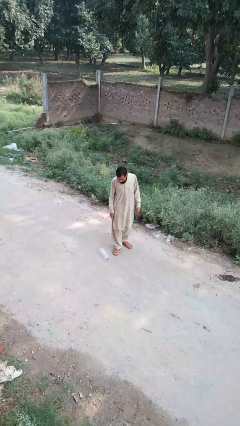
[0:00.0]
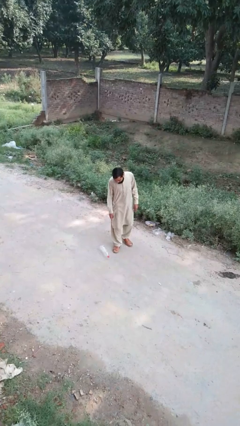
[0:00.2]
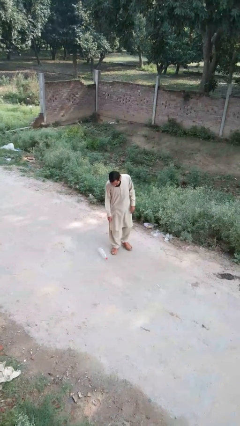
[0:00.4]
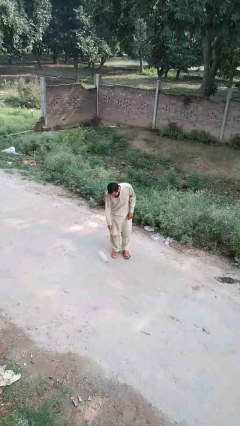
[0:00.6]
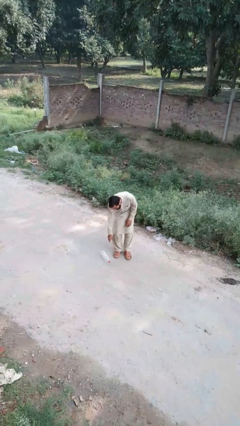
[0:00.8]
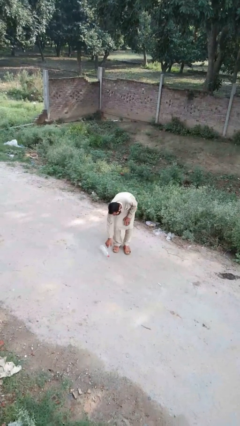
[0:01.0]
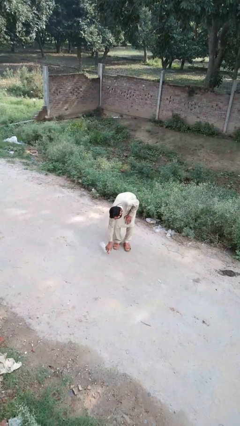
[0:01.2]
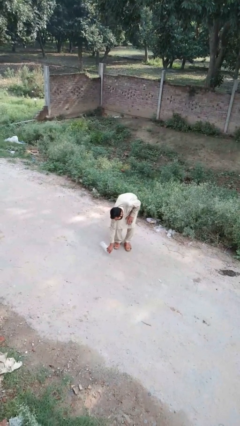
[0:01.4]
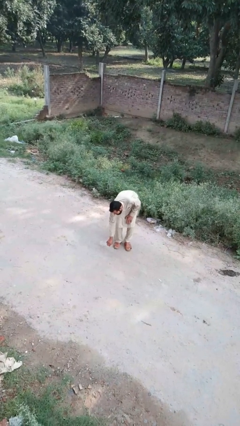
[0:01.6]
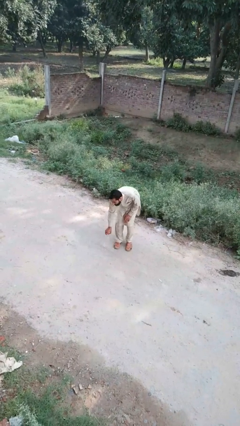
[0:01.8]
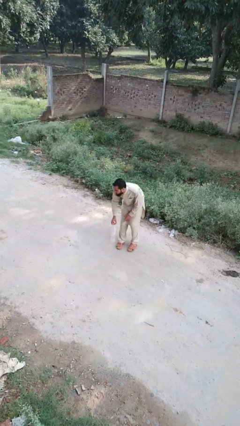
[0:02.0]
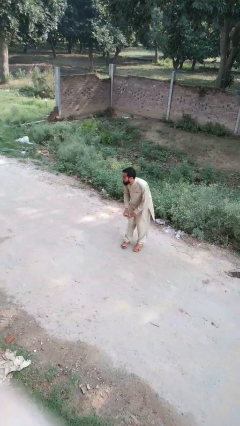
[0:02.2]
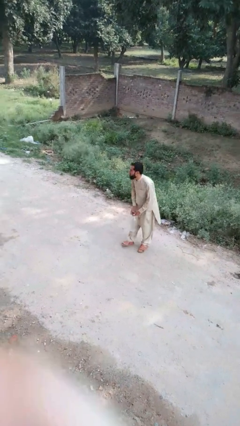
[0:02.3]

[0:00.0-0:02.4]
person picks up object from floor

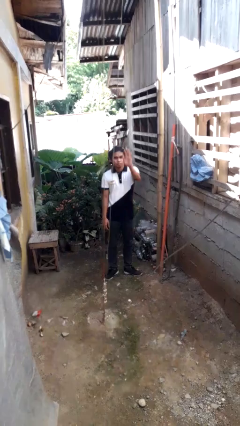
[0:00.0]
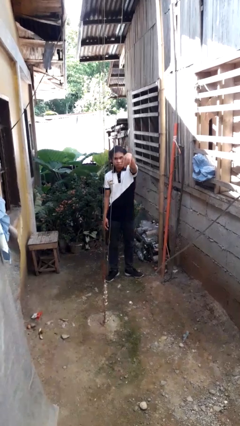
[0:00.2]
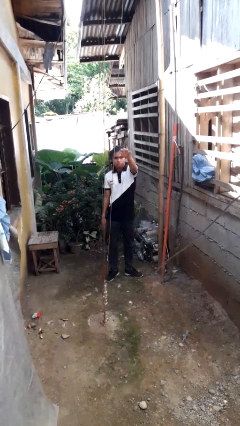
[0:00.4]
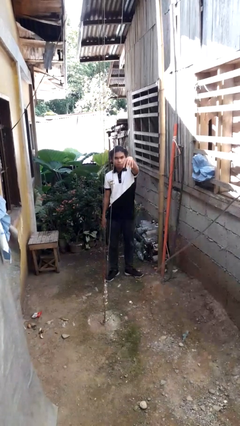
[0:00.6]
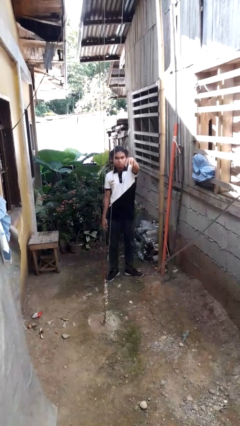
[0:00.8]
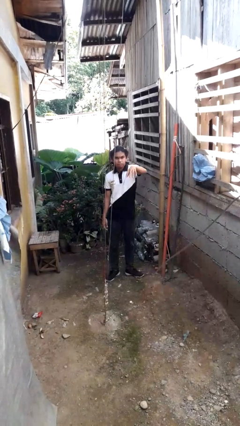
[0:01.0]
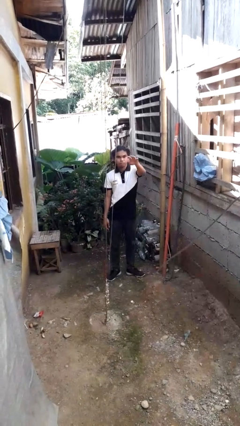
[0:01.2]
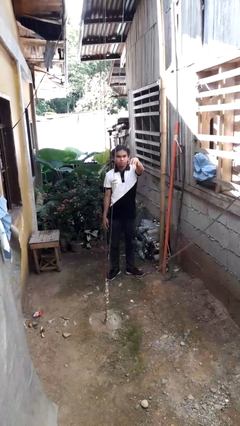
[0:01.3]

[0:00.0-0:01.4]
person gestures come here

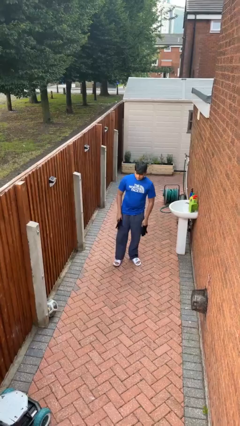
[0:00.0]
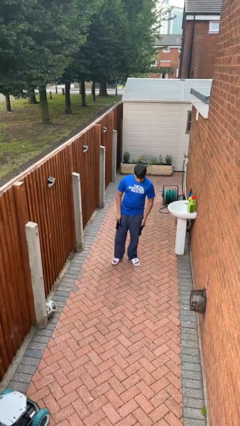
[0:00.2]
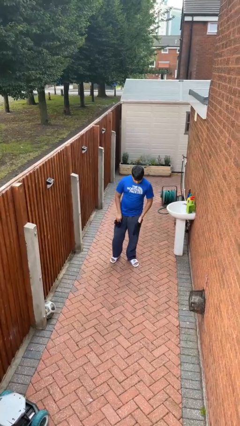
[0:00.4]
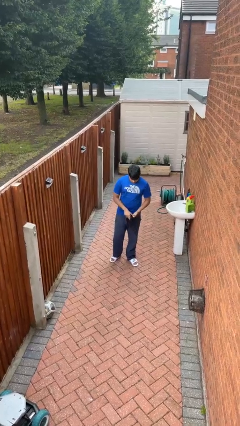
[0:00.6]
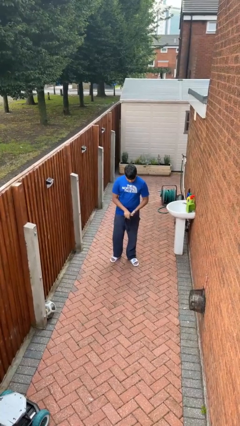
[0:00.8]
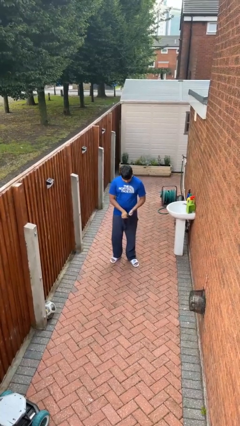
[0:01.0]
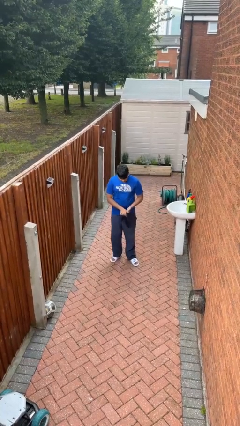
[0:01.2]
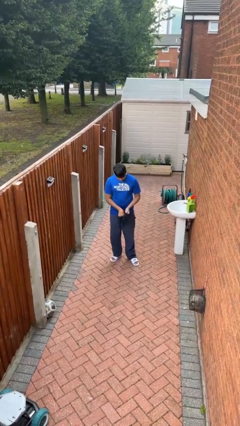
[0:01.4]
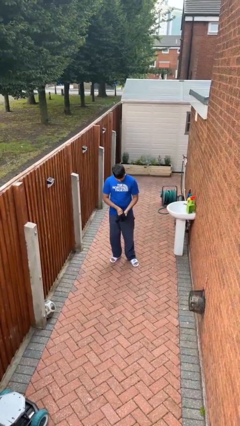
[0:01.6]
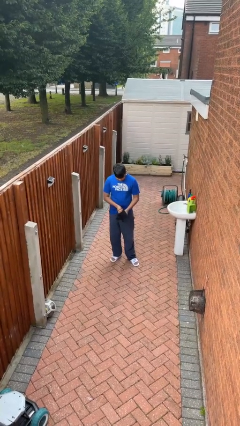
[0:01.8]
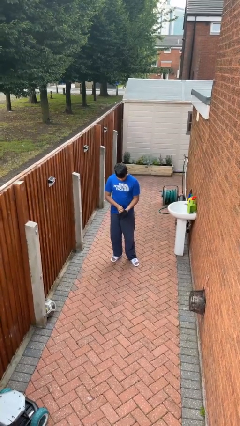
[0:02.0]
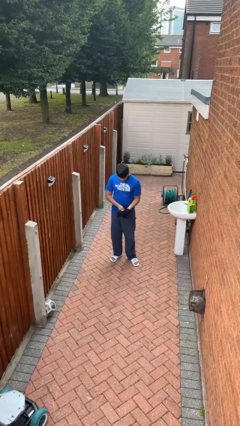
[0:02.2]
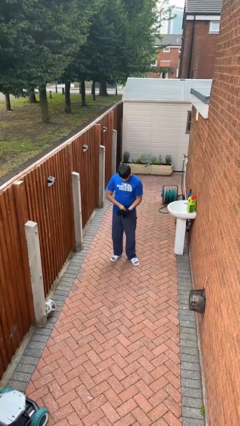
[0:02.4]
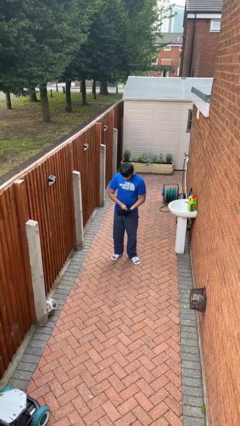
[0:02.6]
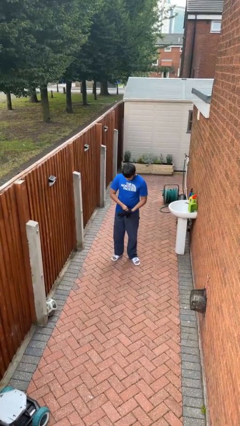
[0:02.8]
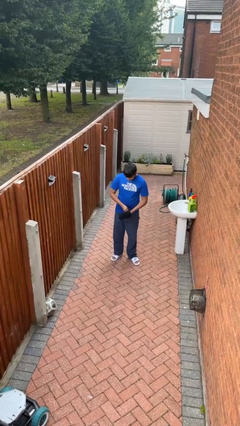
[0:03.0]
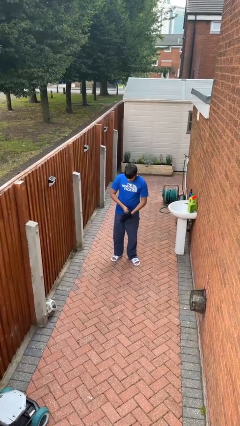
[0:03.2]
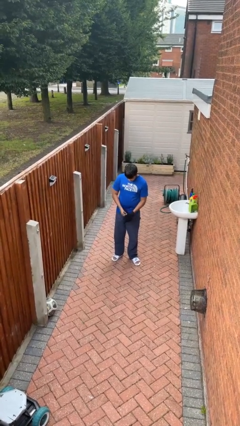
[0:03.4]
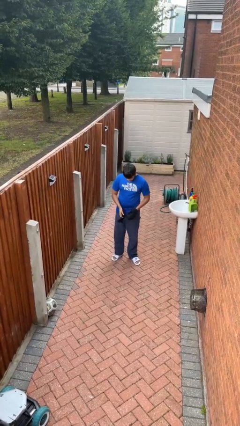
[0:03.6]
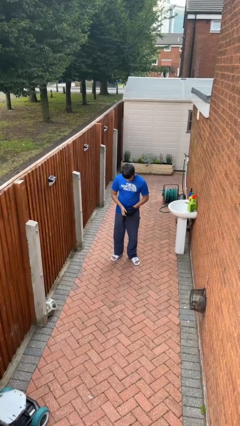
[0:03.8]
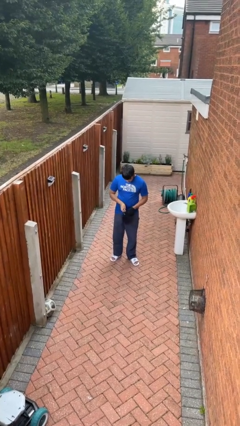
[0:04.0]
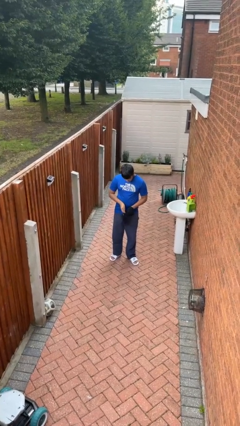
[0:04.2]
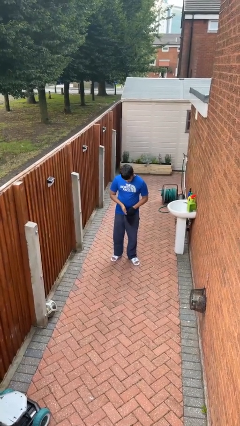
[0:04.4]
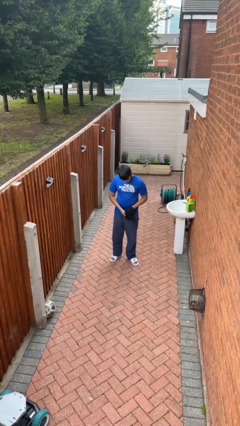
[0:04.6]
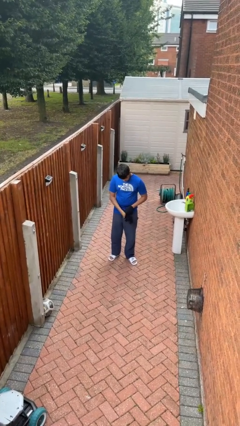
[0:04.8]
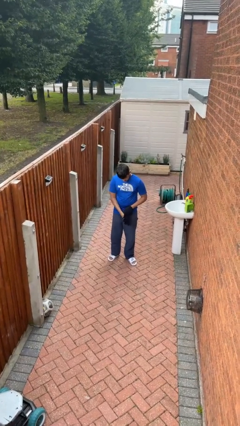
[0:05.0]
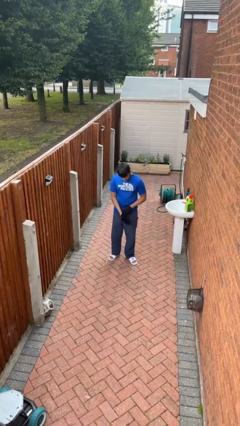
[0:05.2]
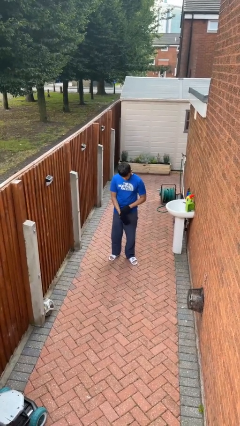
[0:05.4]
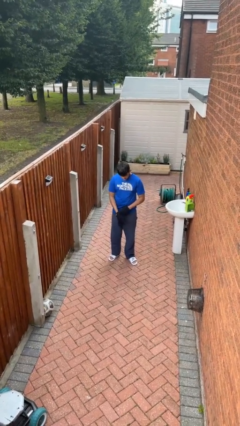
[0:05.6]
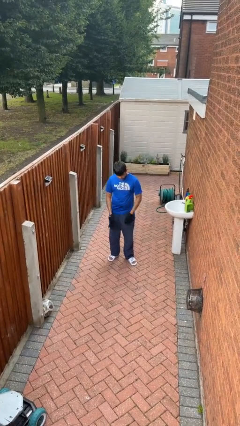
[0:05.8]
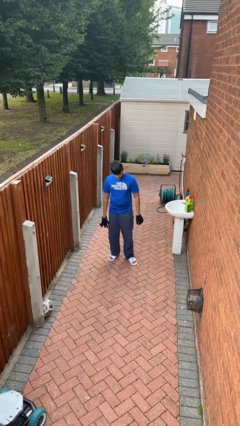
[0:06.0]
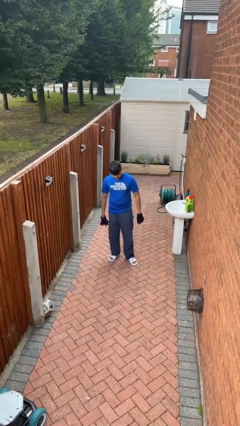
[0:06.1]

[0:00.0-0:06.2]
person puts on gloves

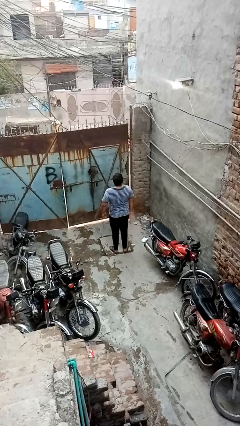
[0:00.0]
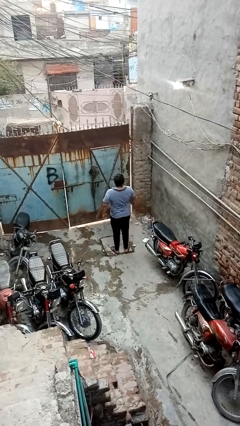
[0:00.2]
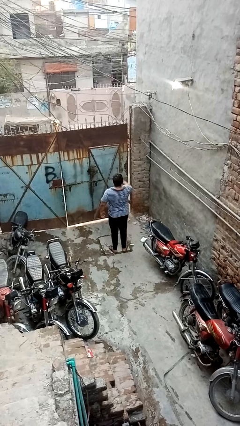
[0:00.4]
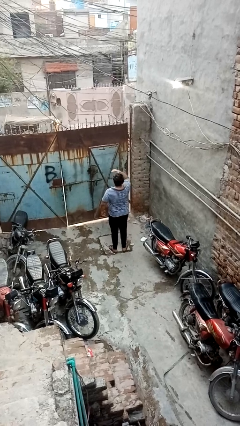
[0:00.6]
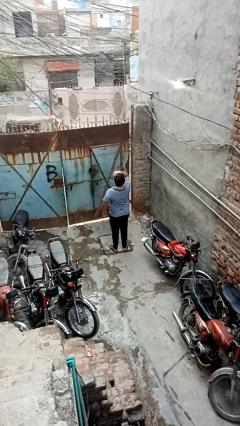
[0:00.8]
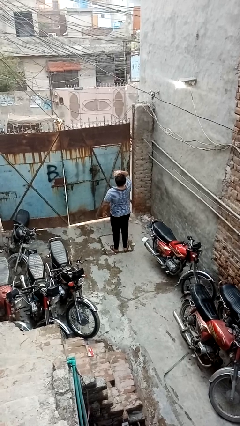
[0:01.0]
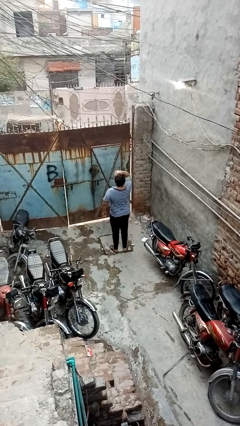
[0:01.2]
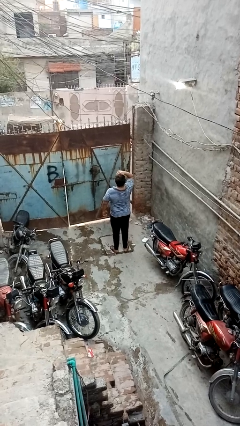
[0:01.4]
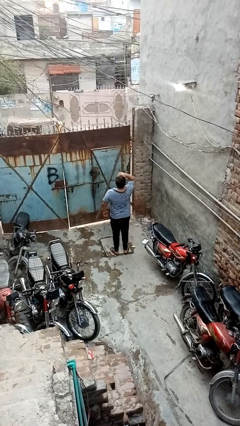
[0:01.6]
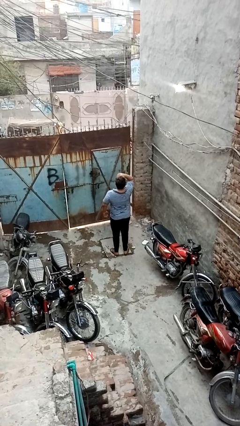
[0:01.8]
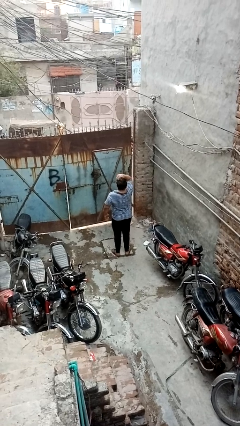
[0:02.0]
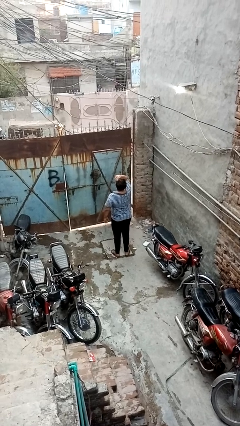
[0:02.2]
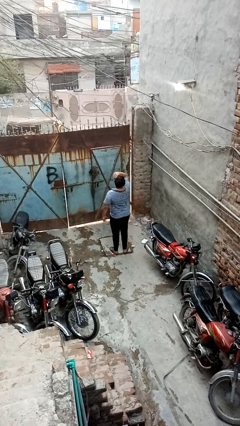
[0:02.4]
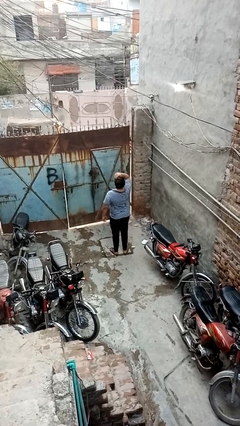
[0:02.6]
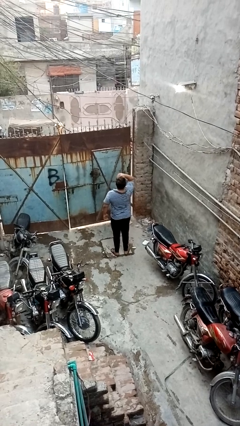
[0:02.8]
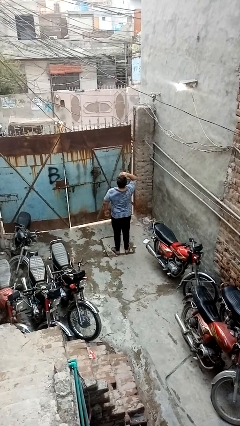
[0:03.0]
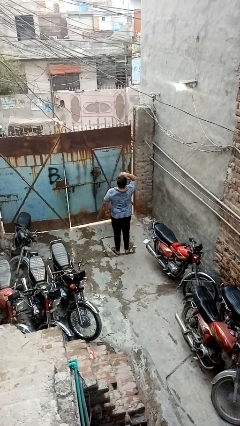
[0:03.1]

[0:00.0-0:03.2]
person shades eyes

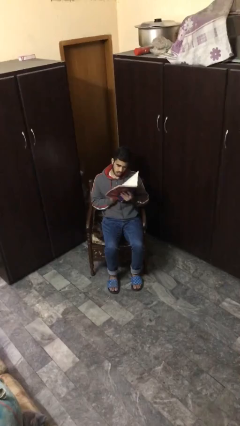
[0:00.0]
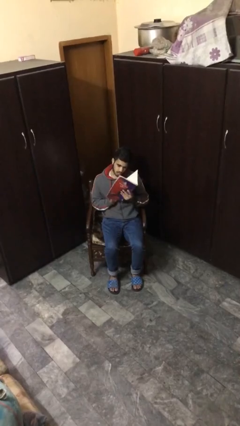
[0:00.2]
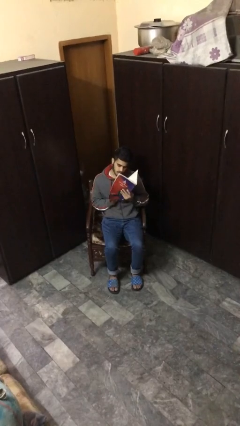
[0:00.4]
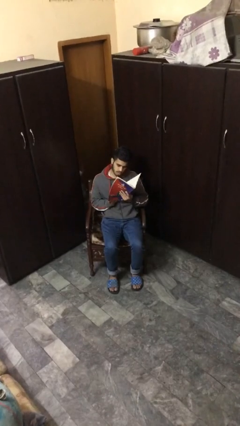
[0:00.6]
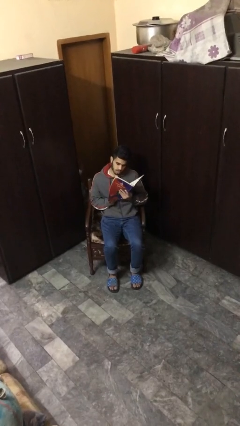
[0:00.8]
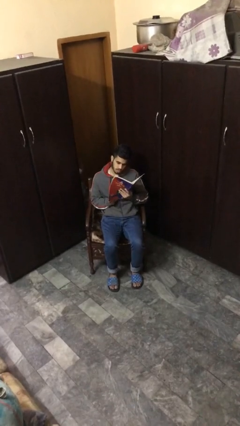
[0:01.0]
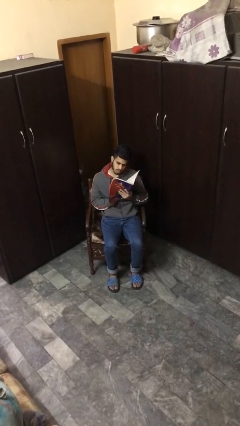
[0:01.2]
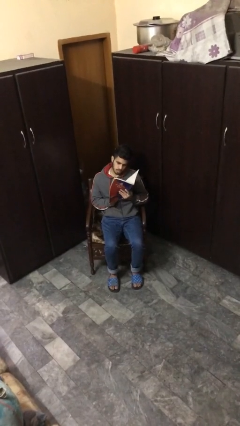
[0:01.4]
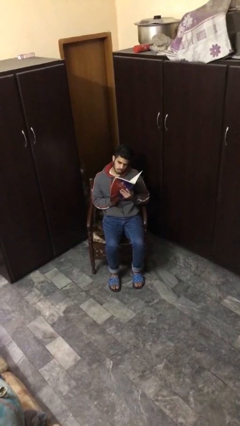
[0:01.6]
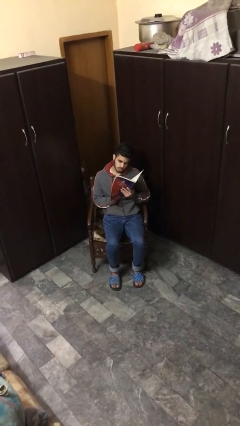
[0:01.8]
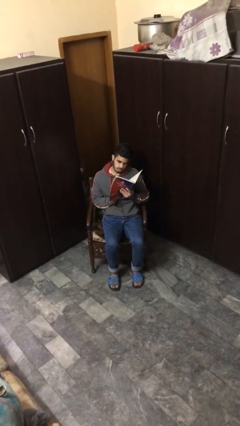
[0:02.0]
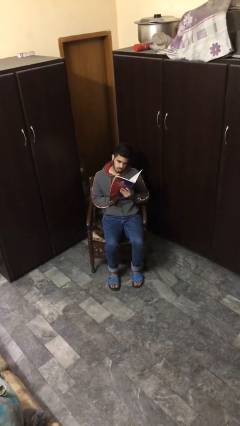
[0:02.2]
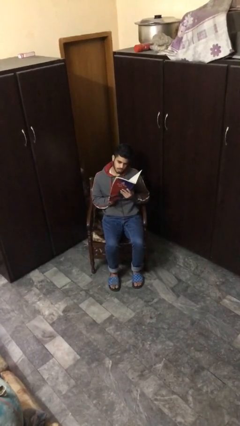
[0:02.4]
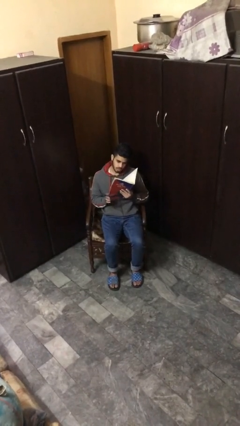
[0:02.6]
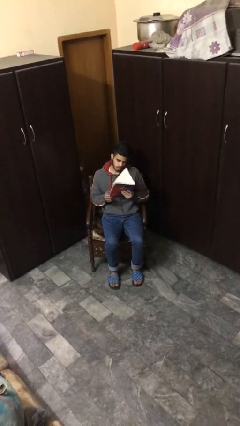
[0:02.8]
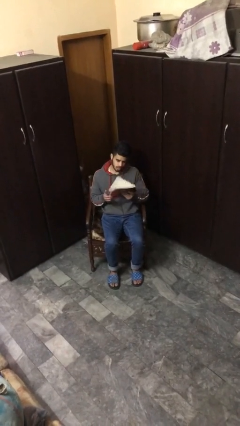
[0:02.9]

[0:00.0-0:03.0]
person reads document

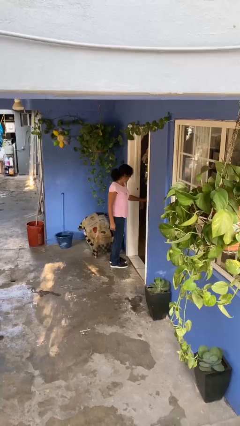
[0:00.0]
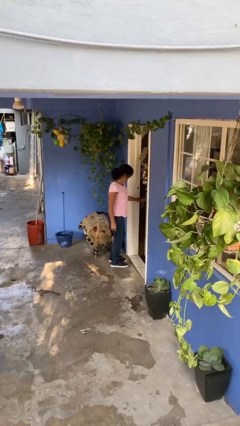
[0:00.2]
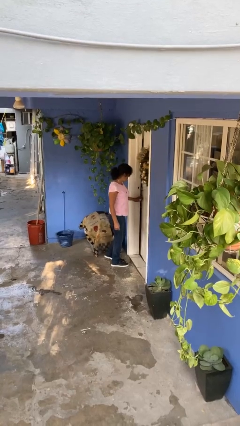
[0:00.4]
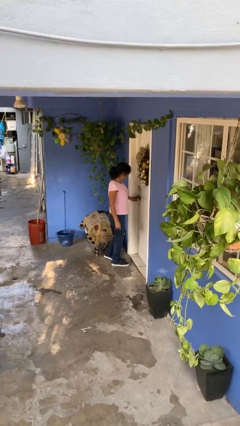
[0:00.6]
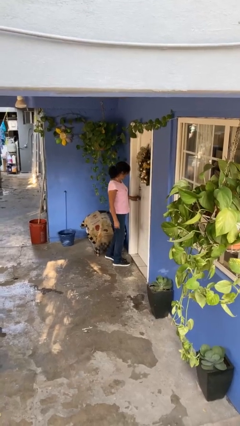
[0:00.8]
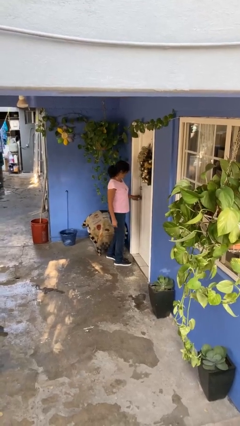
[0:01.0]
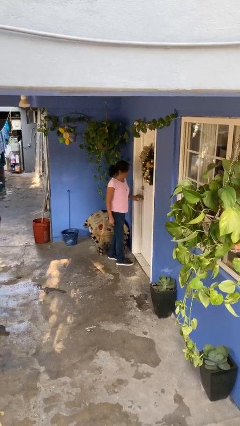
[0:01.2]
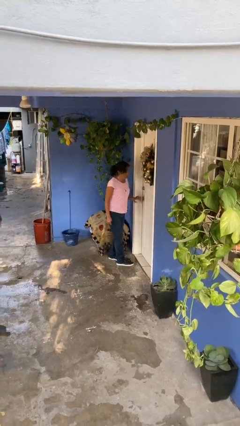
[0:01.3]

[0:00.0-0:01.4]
person closes facility door
